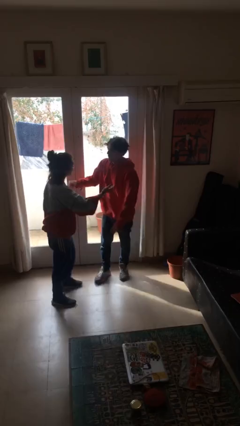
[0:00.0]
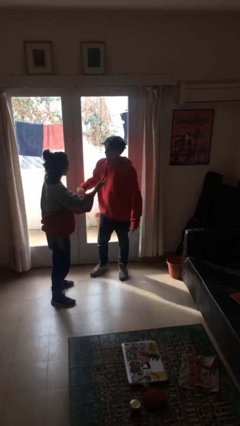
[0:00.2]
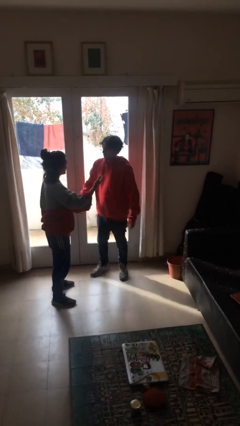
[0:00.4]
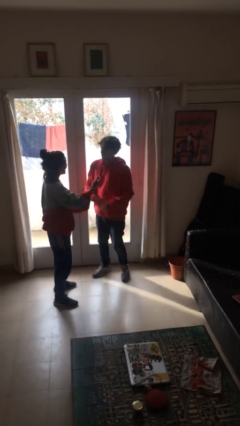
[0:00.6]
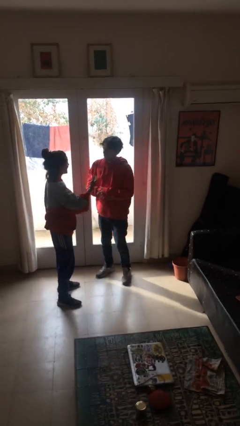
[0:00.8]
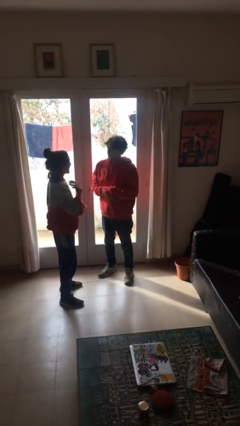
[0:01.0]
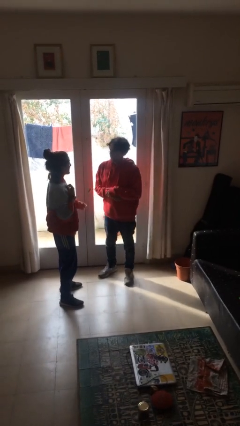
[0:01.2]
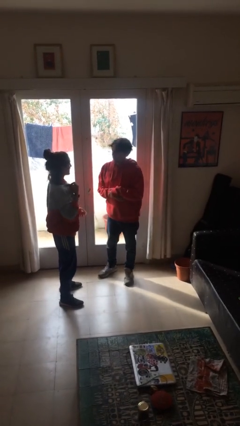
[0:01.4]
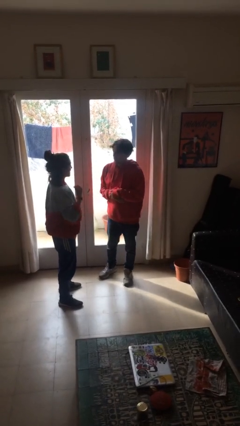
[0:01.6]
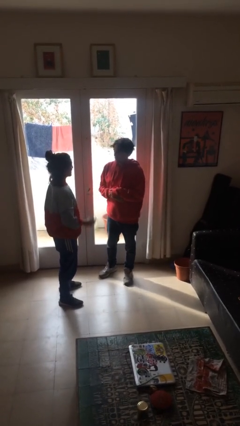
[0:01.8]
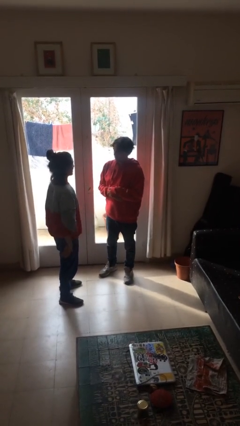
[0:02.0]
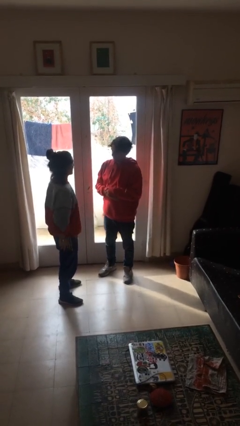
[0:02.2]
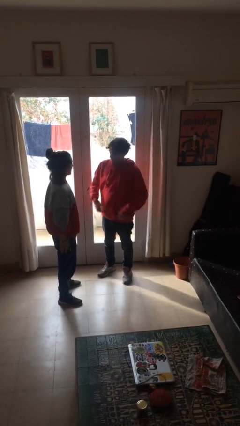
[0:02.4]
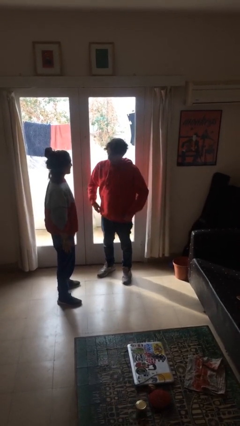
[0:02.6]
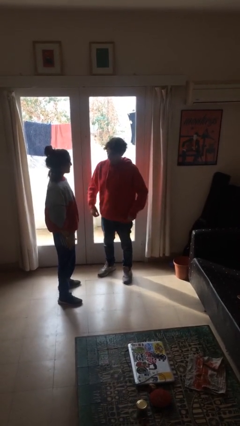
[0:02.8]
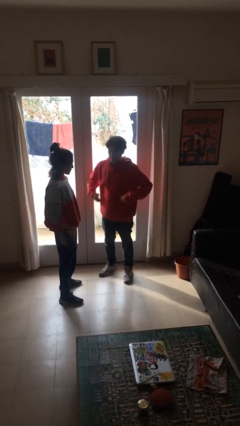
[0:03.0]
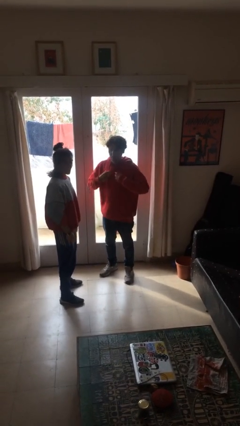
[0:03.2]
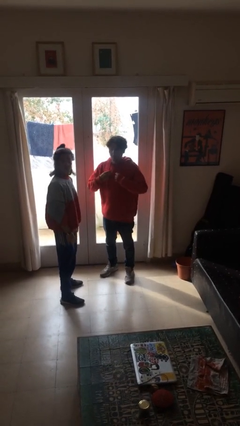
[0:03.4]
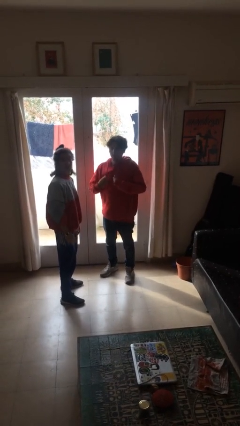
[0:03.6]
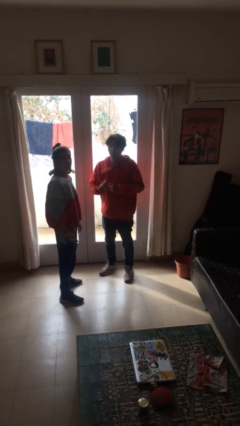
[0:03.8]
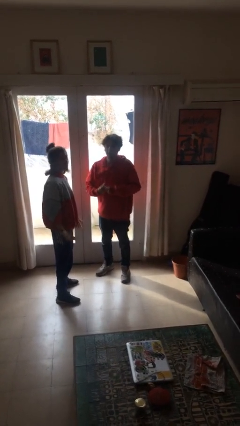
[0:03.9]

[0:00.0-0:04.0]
person talks to person

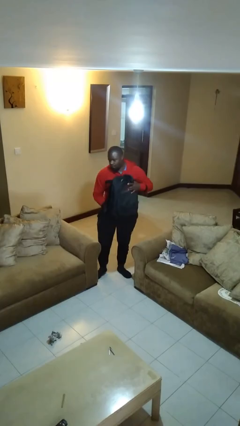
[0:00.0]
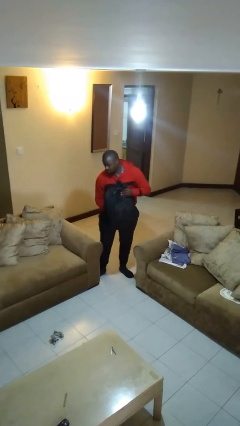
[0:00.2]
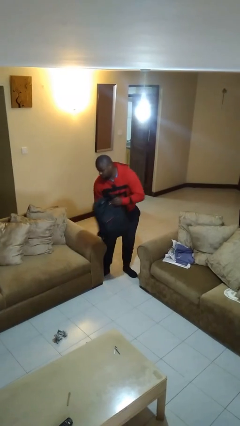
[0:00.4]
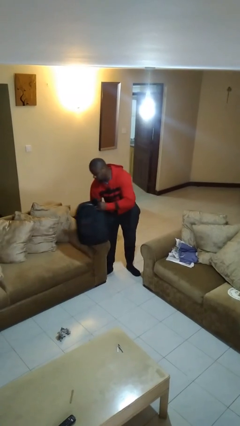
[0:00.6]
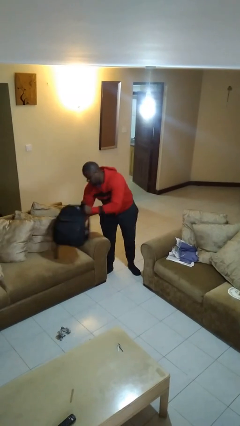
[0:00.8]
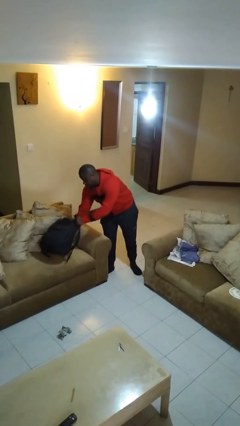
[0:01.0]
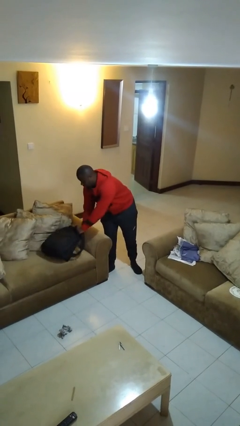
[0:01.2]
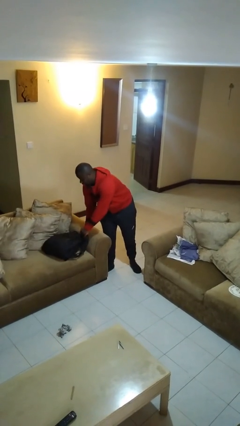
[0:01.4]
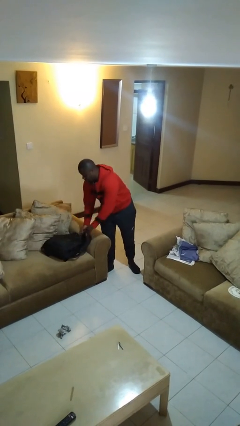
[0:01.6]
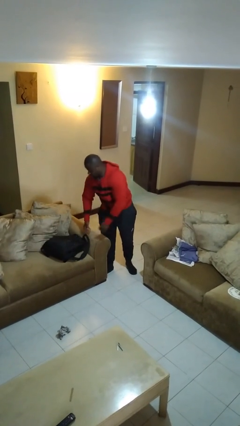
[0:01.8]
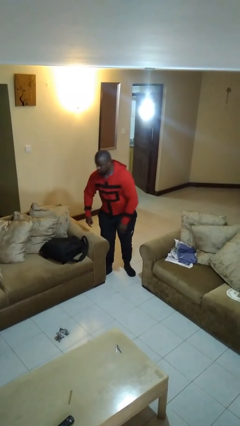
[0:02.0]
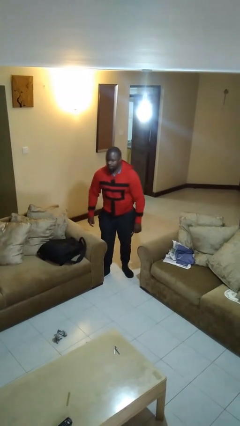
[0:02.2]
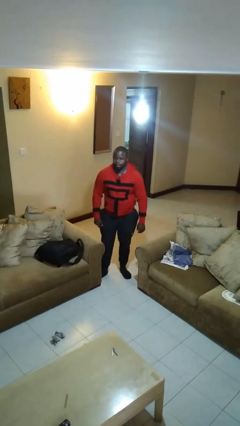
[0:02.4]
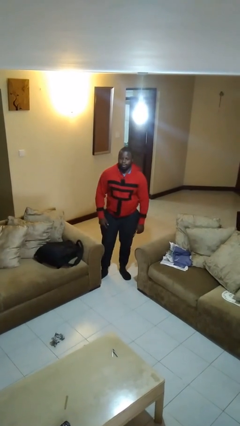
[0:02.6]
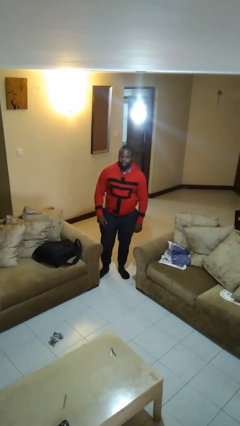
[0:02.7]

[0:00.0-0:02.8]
person puts down object on couch

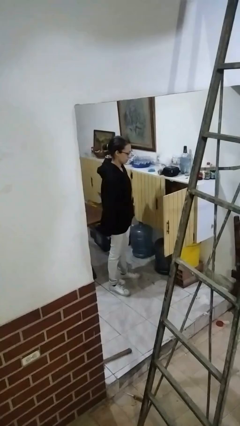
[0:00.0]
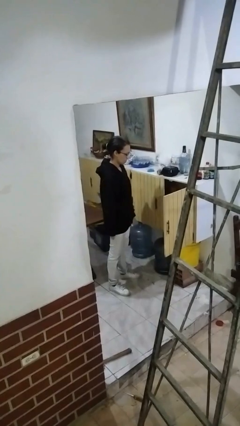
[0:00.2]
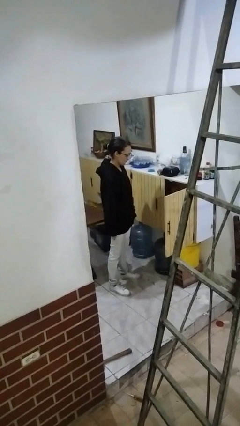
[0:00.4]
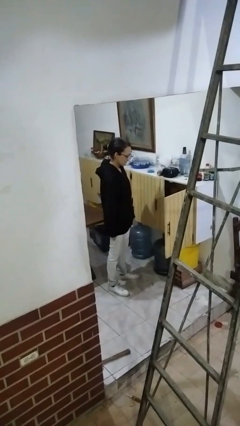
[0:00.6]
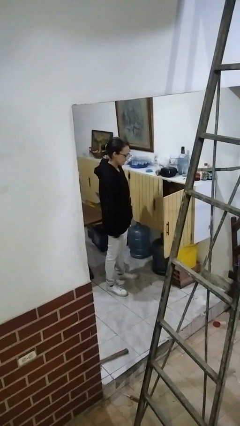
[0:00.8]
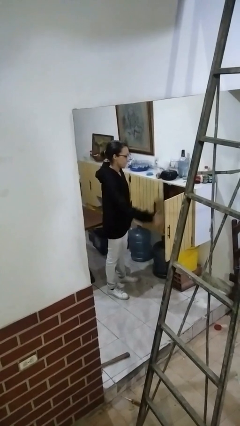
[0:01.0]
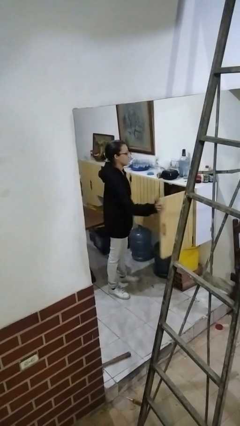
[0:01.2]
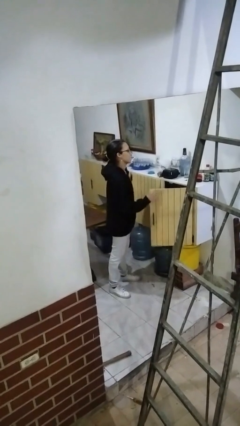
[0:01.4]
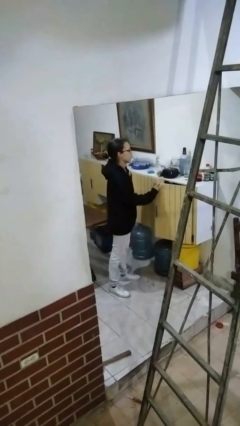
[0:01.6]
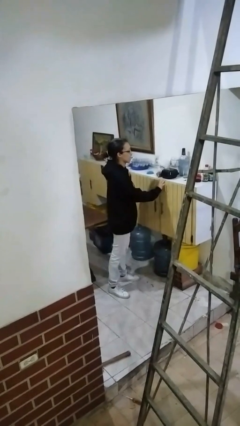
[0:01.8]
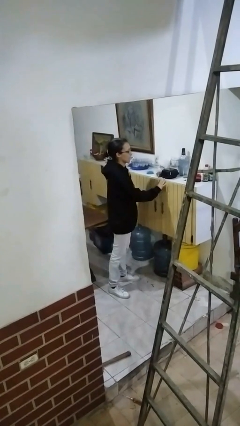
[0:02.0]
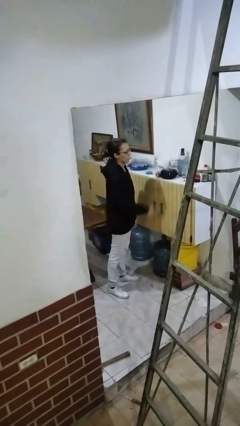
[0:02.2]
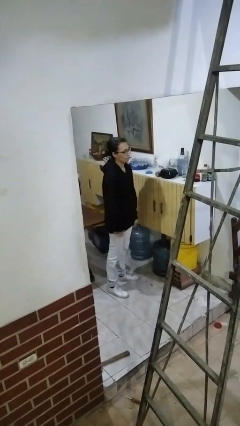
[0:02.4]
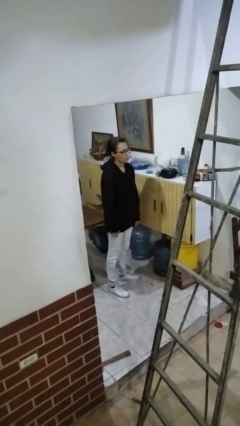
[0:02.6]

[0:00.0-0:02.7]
person closes cabinet

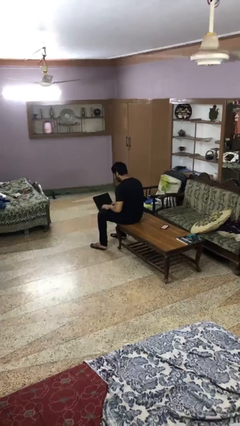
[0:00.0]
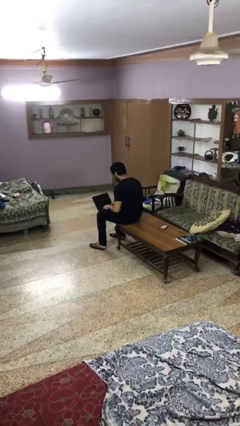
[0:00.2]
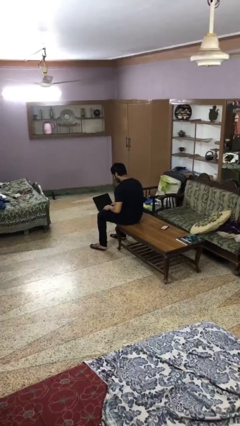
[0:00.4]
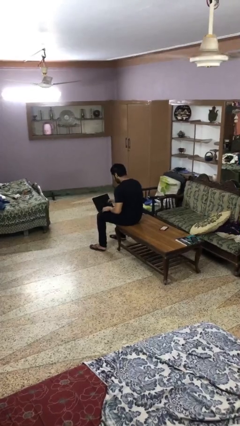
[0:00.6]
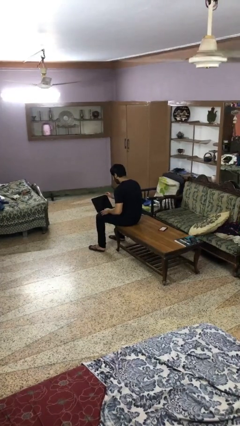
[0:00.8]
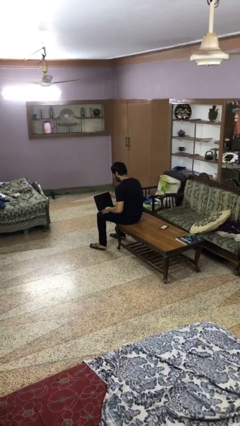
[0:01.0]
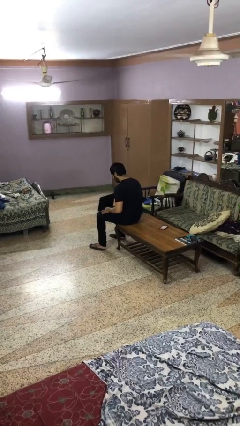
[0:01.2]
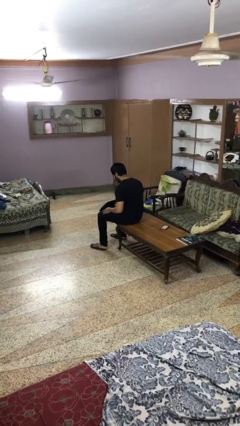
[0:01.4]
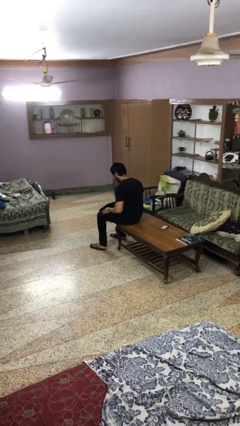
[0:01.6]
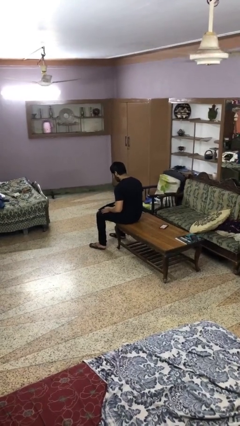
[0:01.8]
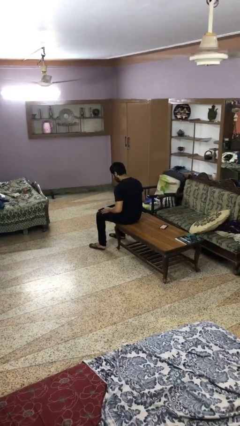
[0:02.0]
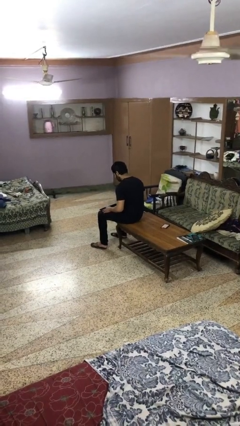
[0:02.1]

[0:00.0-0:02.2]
person closes laptop

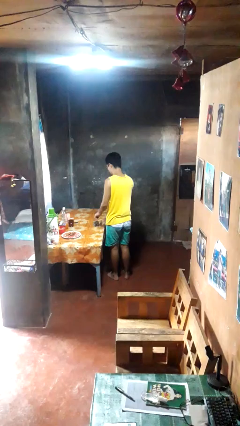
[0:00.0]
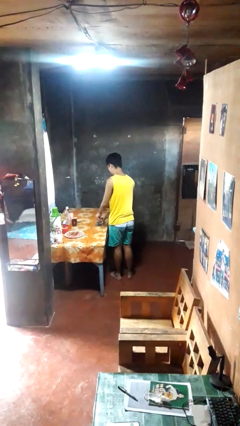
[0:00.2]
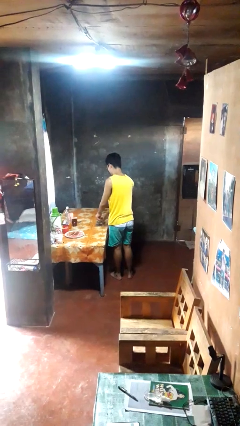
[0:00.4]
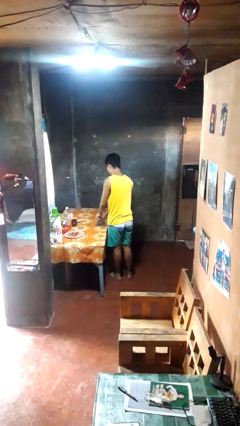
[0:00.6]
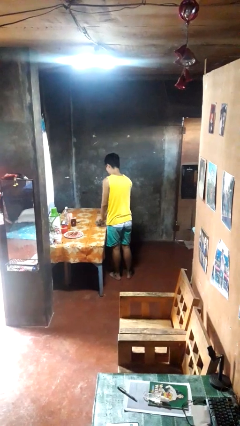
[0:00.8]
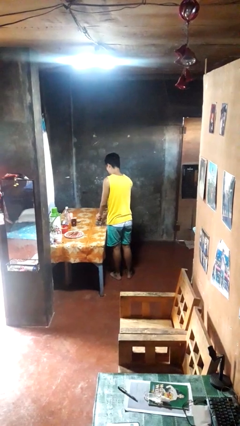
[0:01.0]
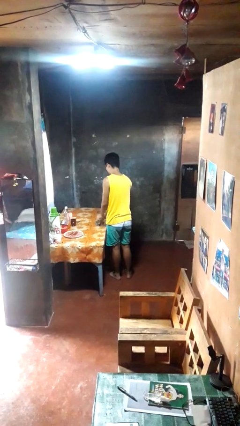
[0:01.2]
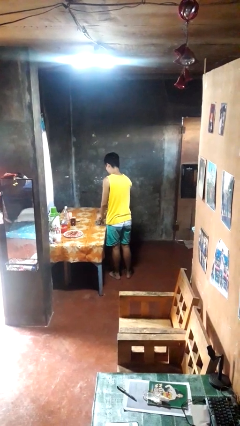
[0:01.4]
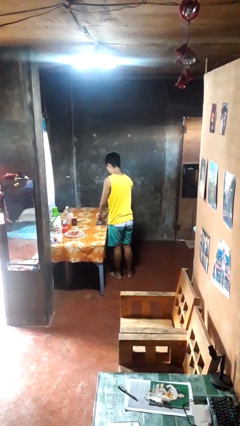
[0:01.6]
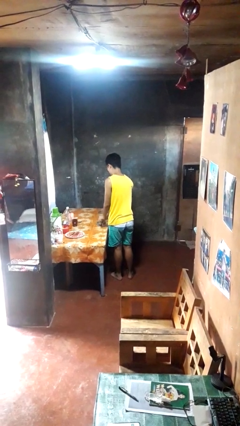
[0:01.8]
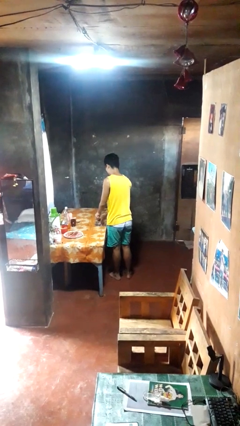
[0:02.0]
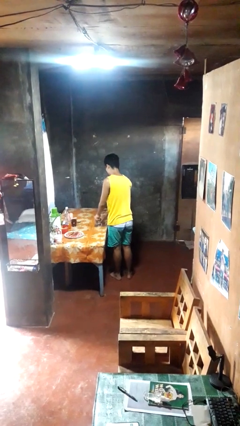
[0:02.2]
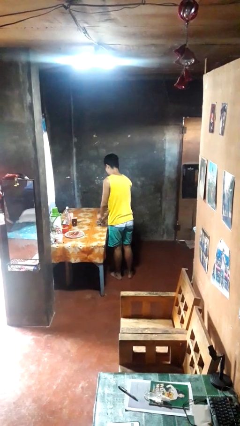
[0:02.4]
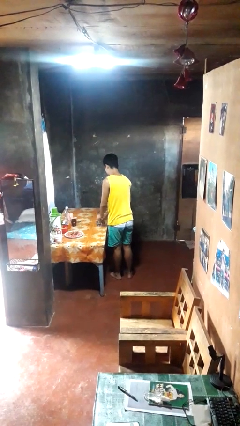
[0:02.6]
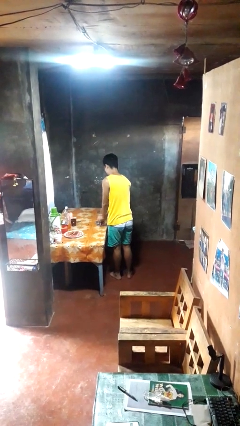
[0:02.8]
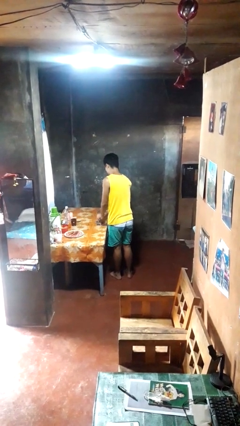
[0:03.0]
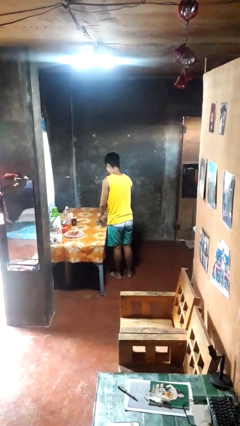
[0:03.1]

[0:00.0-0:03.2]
person opens can with can opener

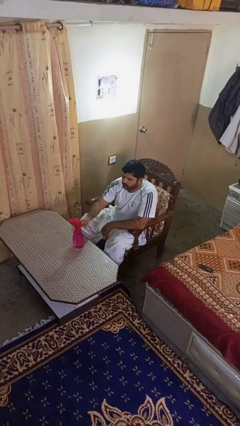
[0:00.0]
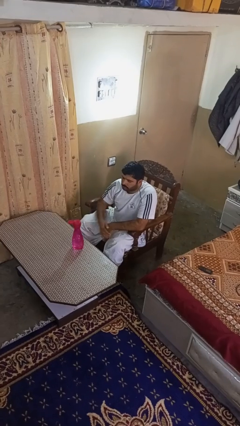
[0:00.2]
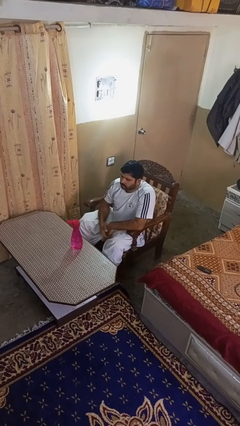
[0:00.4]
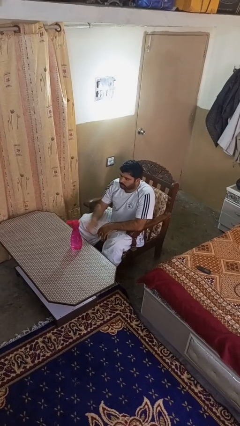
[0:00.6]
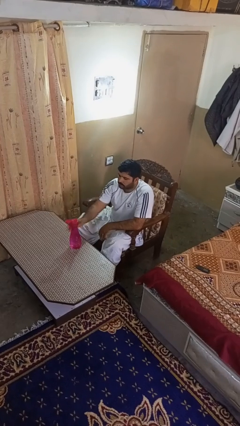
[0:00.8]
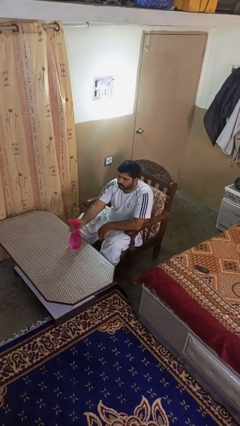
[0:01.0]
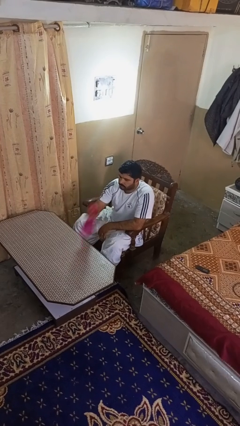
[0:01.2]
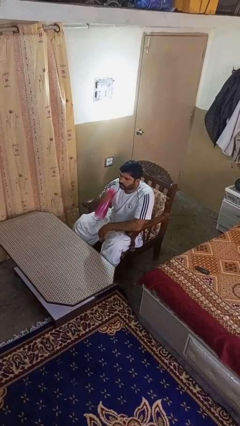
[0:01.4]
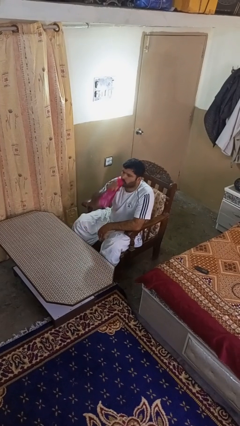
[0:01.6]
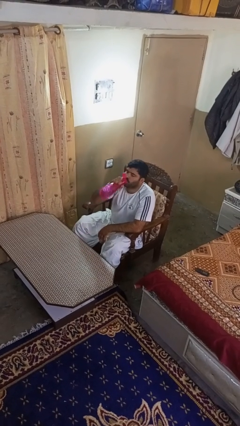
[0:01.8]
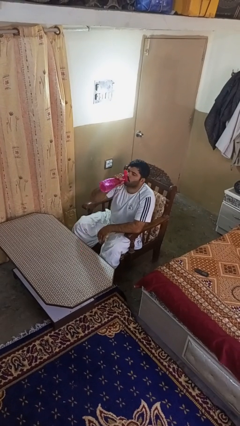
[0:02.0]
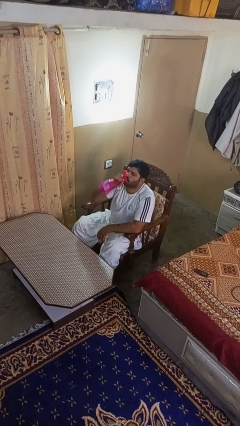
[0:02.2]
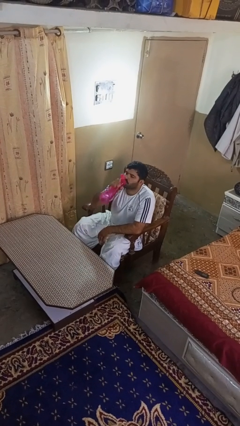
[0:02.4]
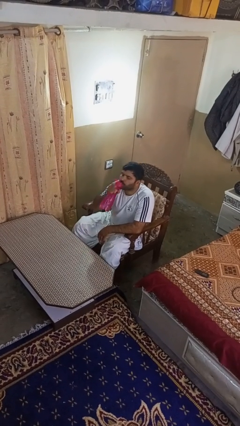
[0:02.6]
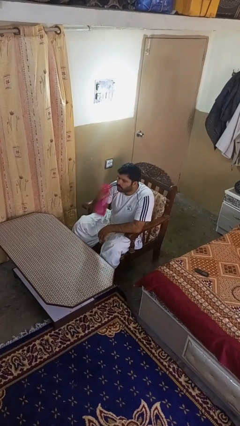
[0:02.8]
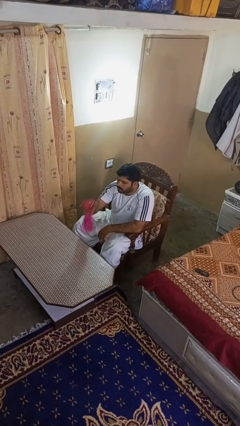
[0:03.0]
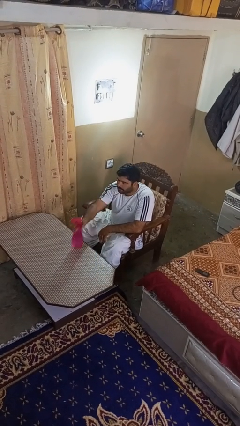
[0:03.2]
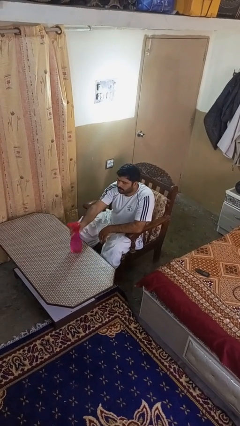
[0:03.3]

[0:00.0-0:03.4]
person drinks from bottle
